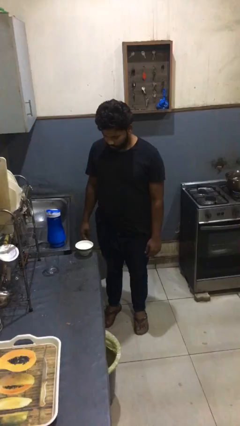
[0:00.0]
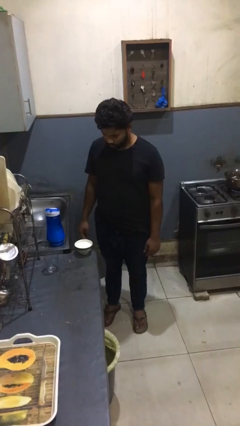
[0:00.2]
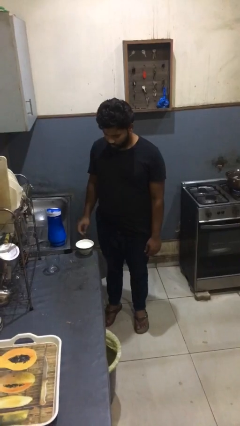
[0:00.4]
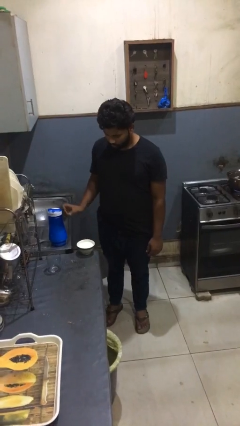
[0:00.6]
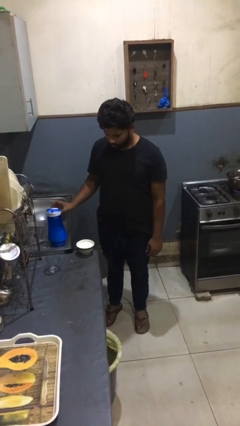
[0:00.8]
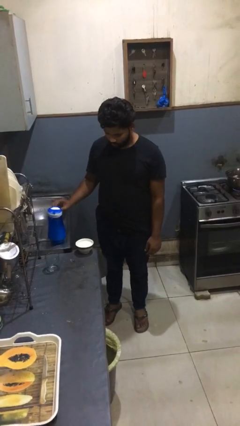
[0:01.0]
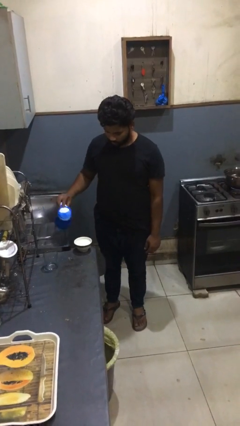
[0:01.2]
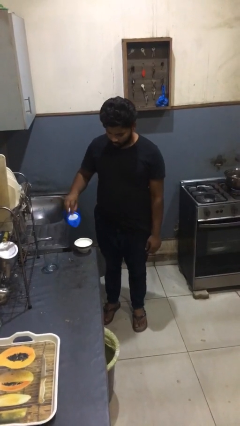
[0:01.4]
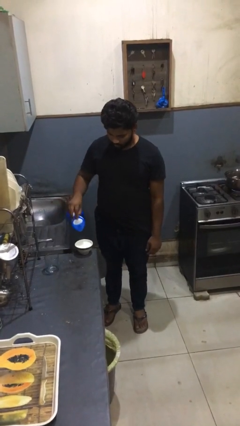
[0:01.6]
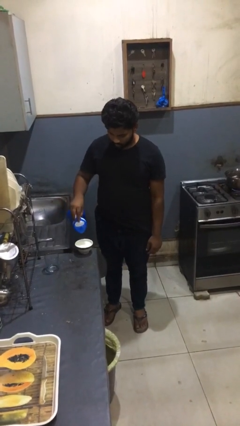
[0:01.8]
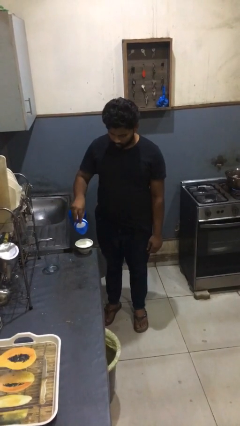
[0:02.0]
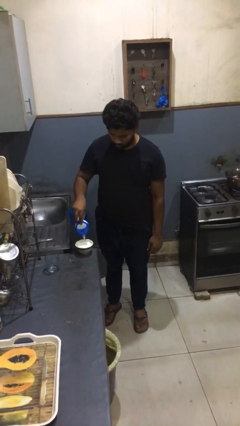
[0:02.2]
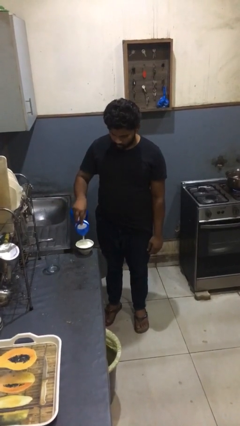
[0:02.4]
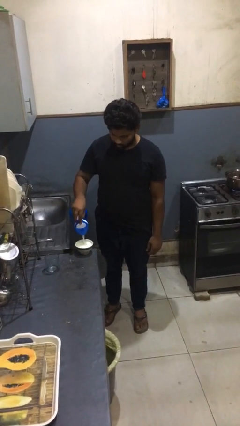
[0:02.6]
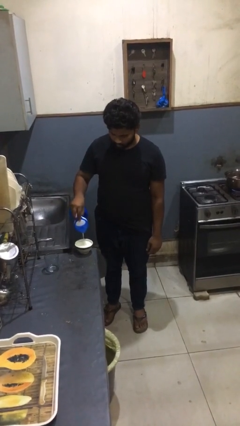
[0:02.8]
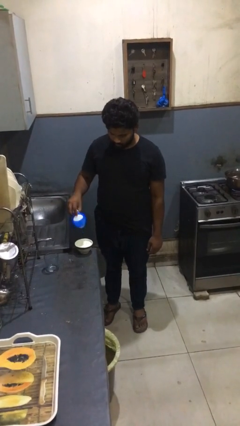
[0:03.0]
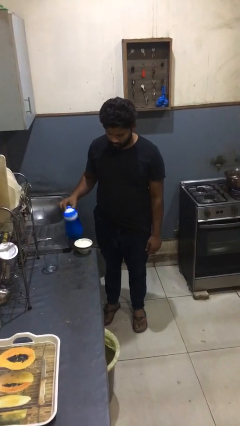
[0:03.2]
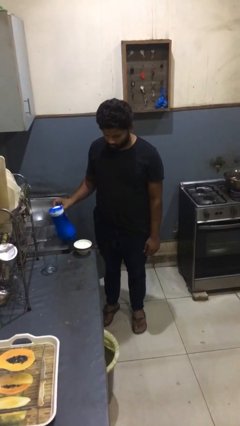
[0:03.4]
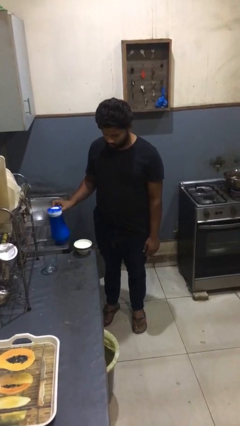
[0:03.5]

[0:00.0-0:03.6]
person pours into bowl

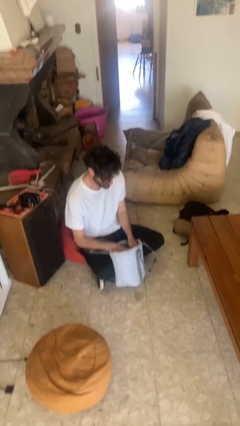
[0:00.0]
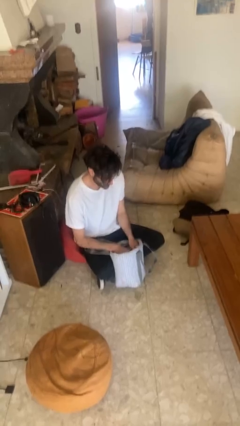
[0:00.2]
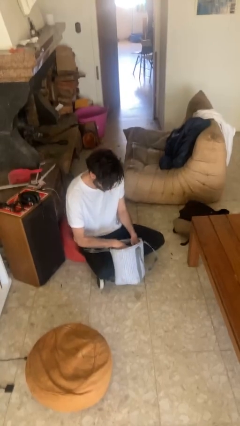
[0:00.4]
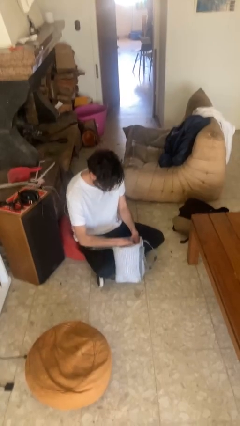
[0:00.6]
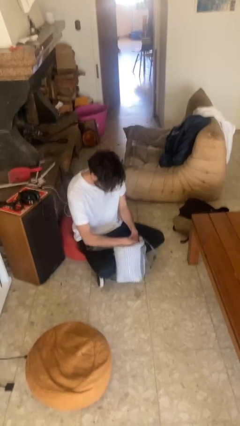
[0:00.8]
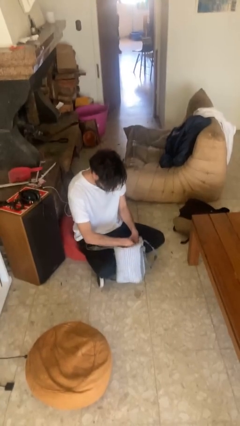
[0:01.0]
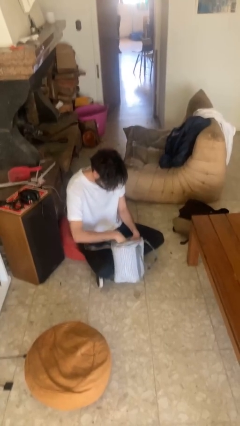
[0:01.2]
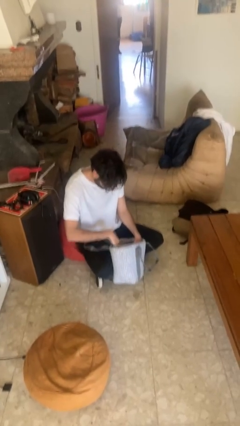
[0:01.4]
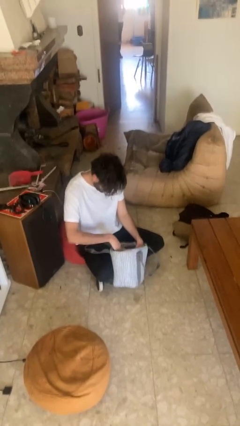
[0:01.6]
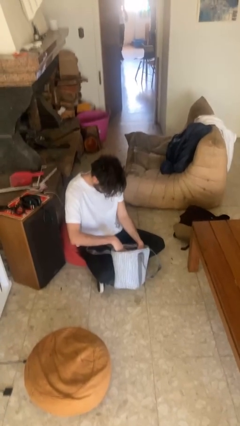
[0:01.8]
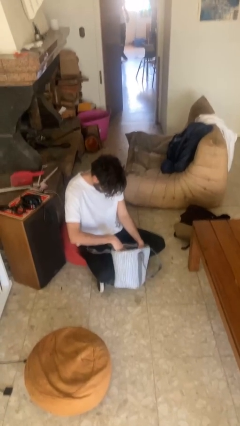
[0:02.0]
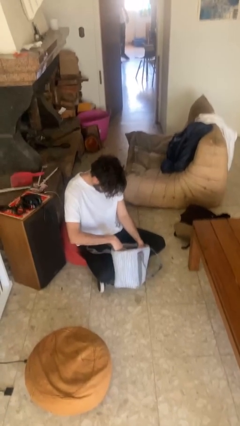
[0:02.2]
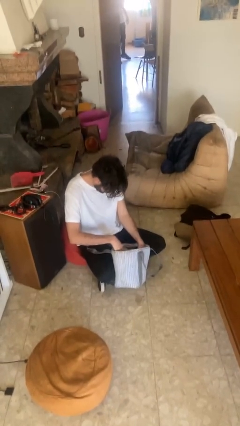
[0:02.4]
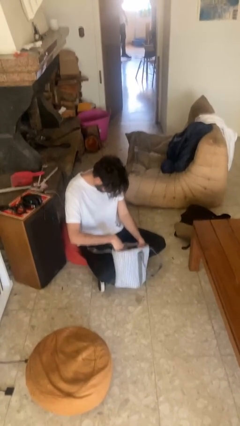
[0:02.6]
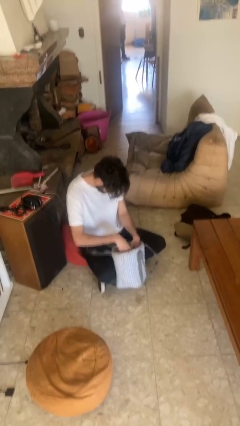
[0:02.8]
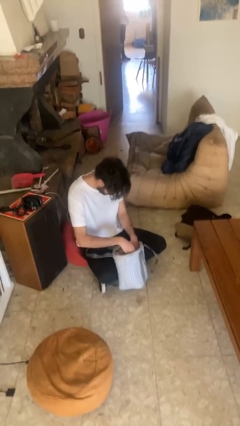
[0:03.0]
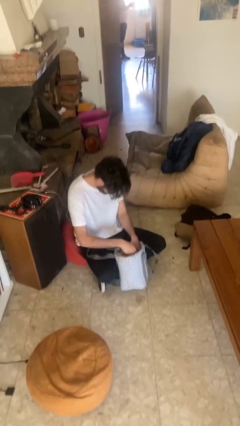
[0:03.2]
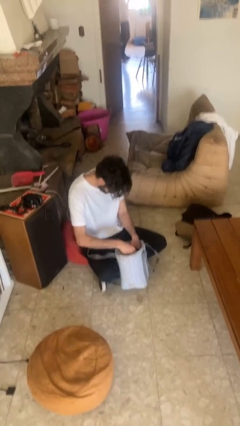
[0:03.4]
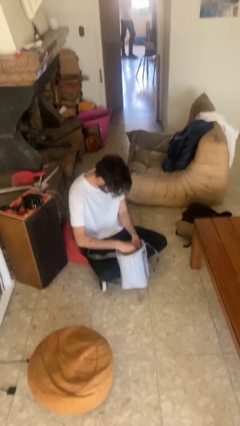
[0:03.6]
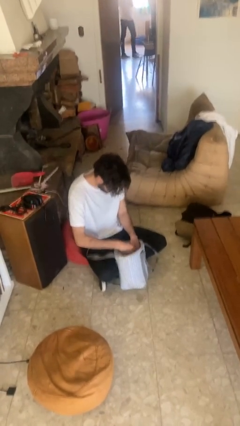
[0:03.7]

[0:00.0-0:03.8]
person searches in purse

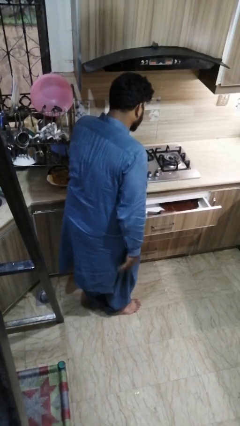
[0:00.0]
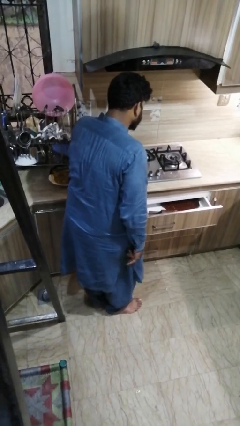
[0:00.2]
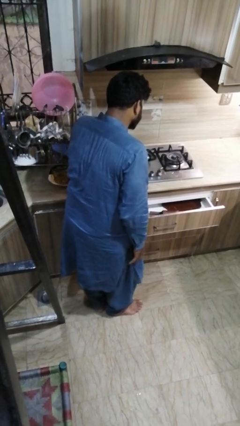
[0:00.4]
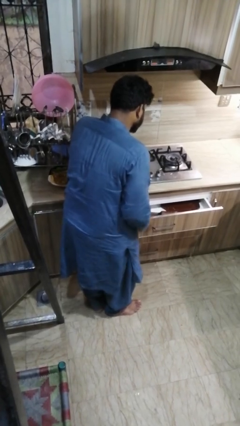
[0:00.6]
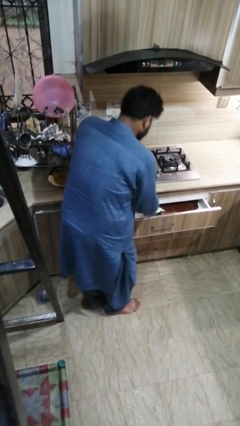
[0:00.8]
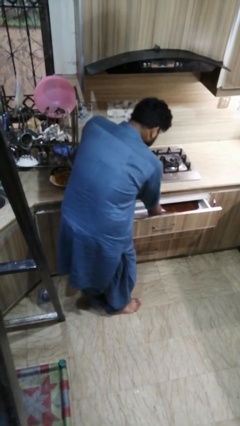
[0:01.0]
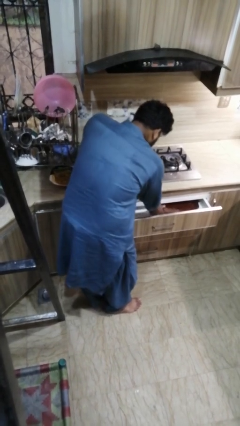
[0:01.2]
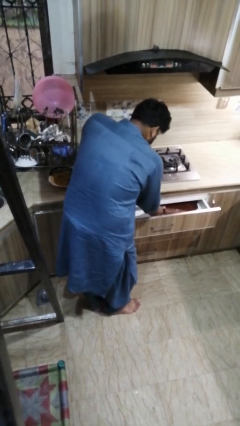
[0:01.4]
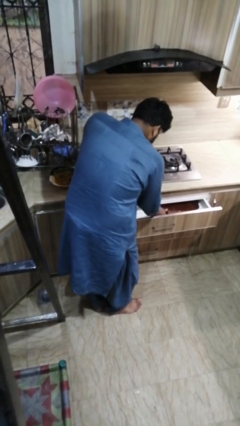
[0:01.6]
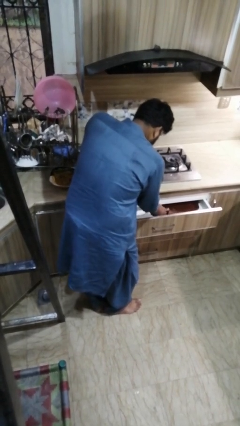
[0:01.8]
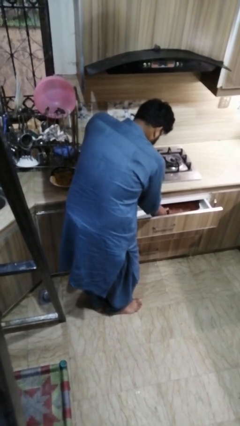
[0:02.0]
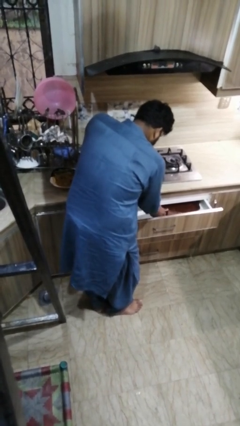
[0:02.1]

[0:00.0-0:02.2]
person searches in kitchen drawer

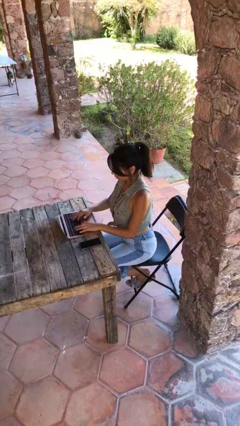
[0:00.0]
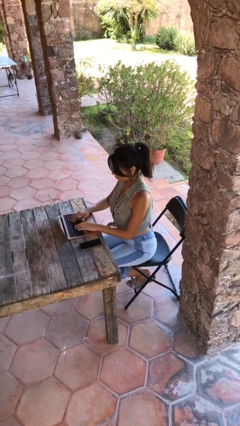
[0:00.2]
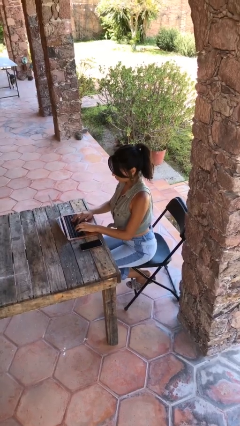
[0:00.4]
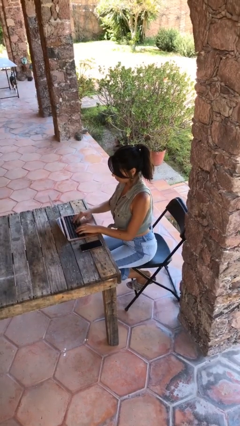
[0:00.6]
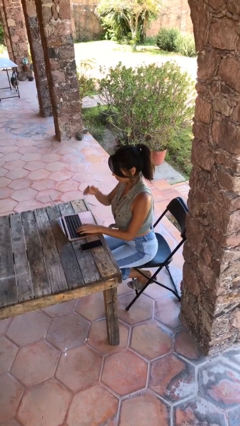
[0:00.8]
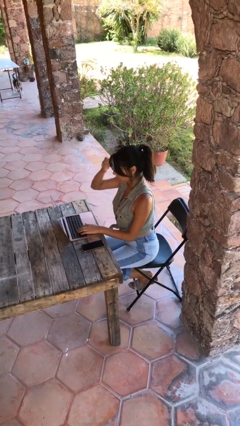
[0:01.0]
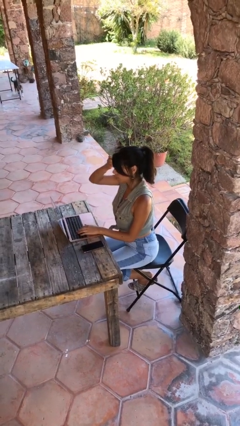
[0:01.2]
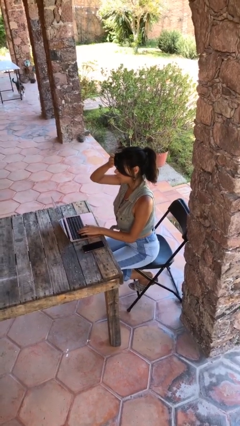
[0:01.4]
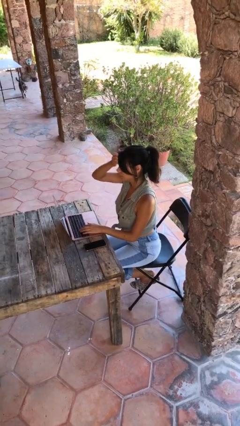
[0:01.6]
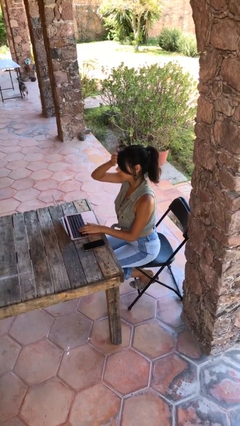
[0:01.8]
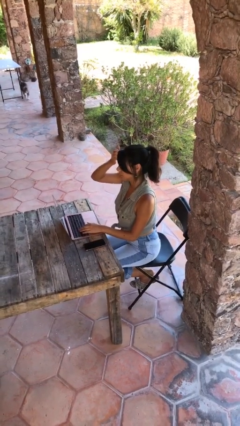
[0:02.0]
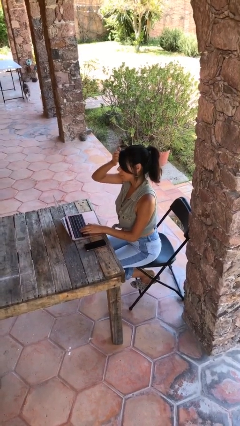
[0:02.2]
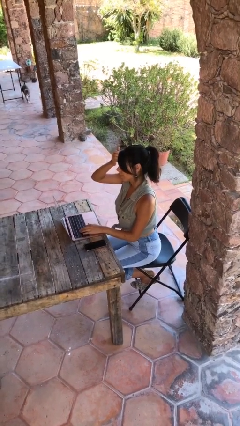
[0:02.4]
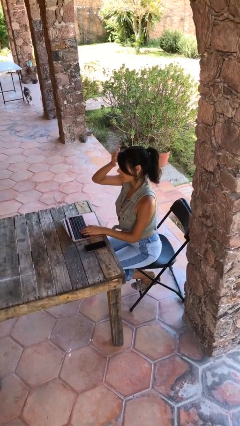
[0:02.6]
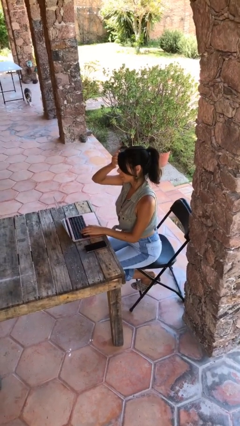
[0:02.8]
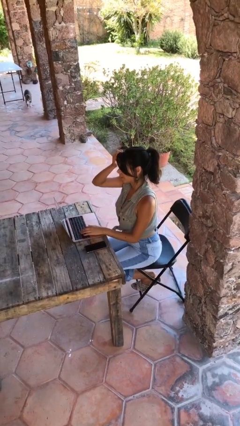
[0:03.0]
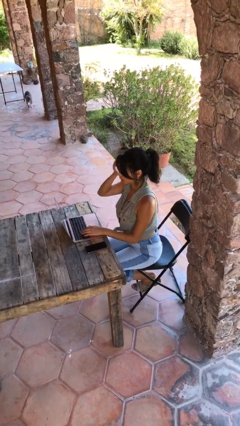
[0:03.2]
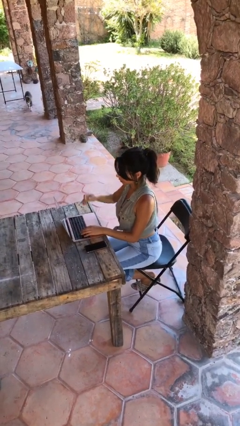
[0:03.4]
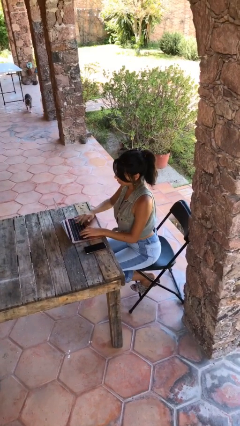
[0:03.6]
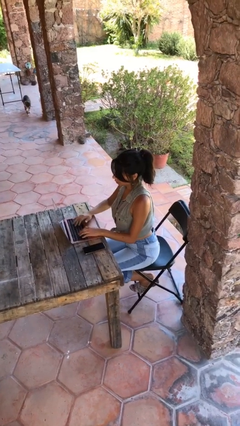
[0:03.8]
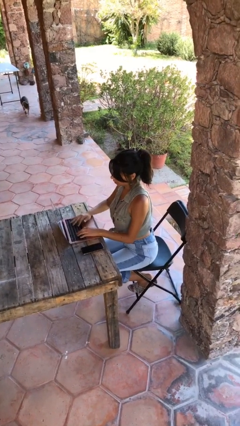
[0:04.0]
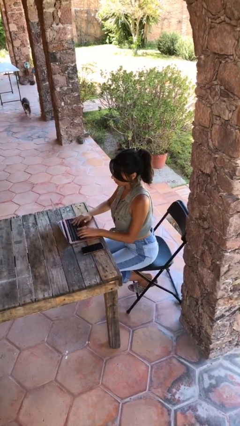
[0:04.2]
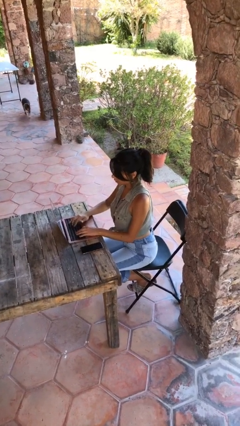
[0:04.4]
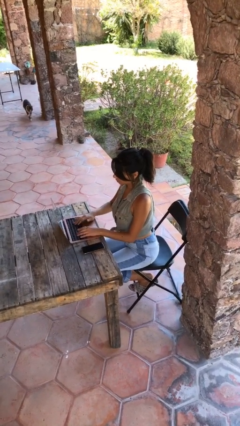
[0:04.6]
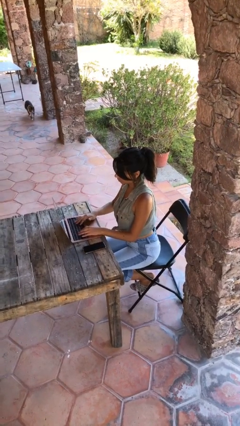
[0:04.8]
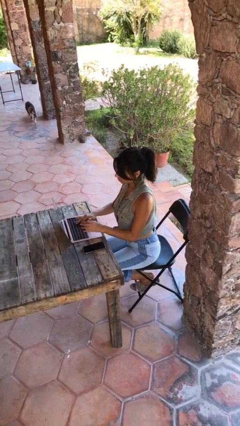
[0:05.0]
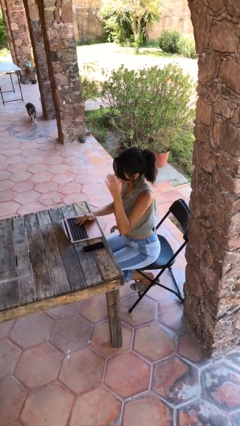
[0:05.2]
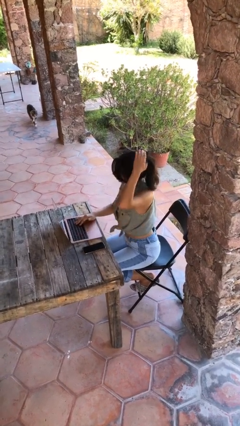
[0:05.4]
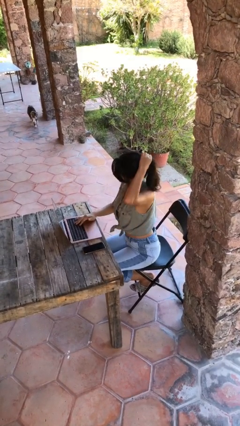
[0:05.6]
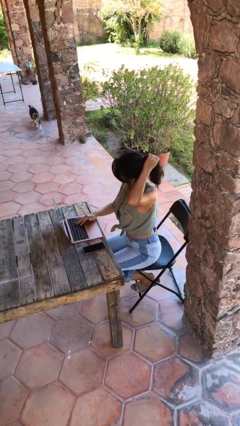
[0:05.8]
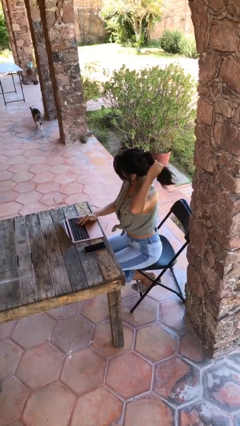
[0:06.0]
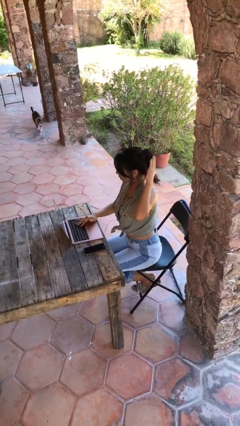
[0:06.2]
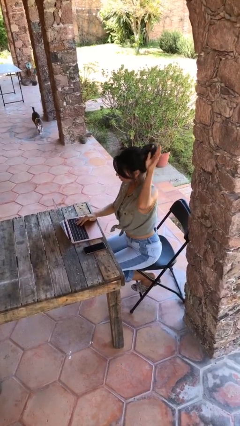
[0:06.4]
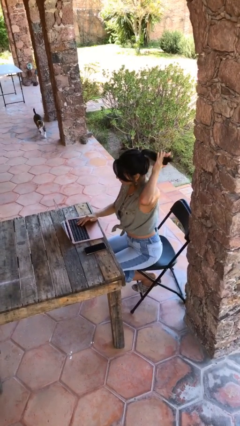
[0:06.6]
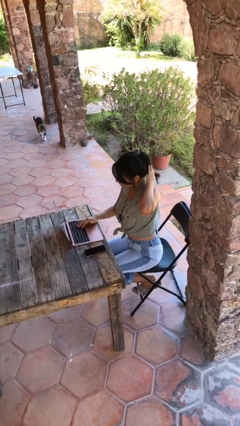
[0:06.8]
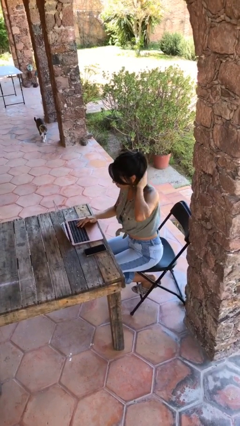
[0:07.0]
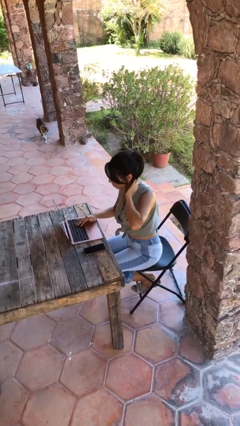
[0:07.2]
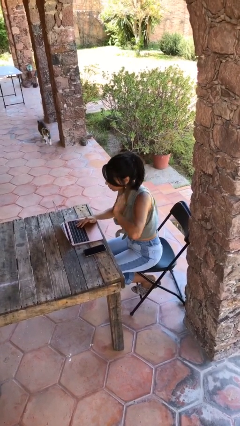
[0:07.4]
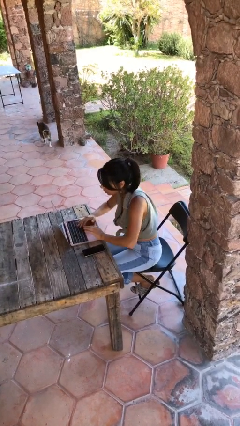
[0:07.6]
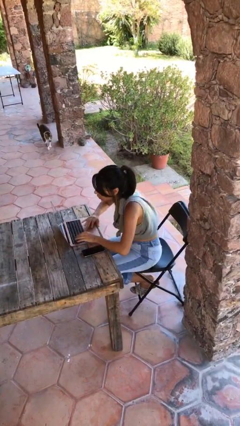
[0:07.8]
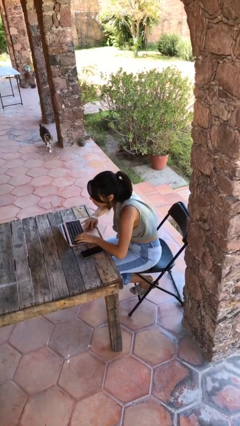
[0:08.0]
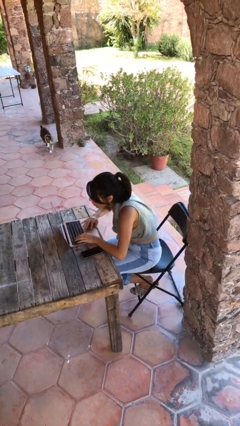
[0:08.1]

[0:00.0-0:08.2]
person interacts with laptop

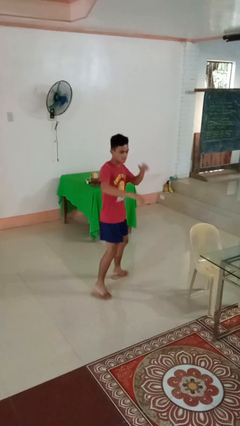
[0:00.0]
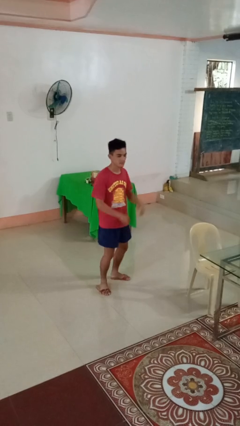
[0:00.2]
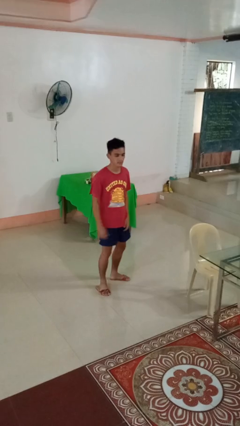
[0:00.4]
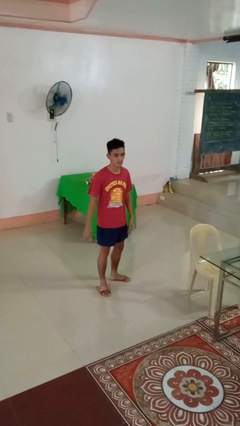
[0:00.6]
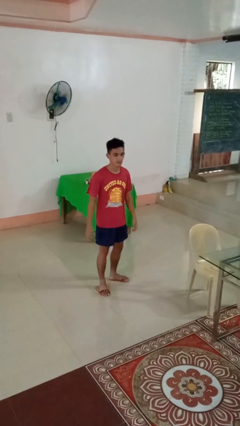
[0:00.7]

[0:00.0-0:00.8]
person karate chop
